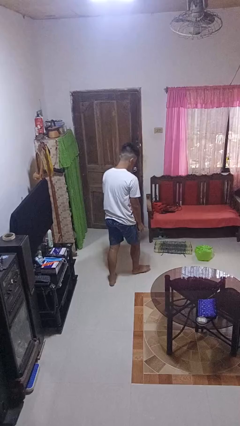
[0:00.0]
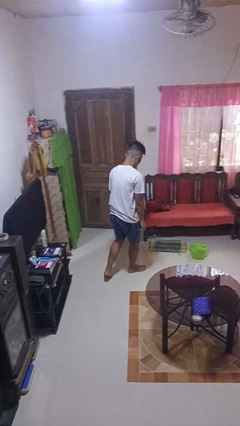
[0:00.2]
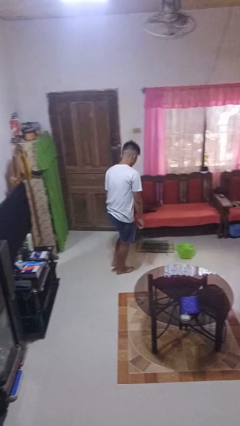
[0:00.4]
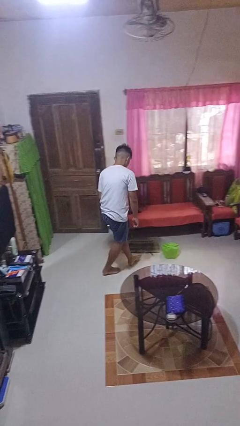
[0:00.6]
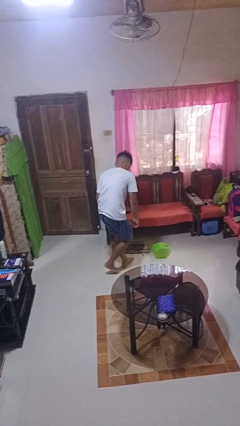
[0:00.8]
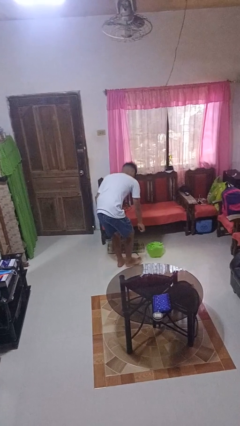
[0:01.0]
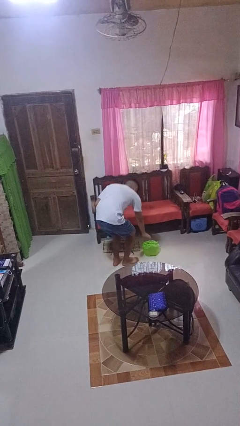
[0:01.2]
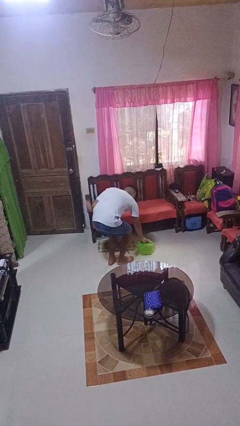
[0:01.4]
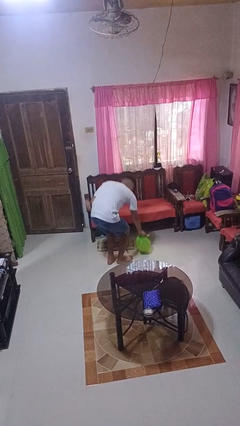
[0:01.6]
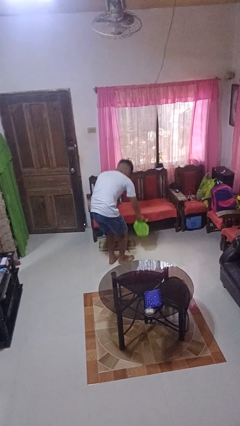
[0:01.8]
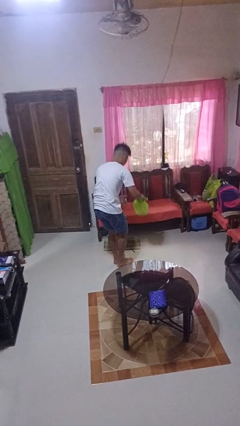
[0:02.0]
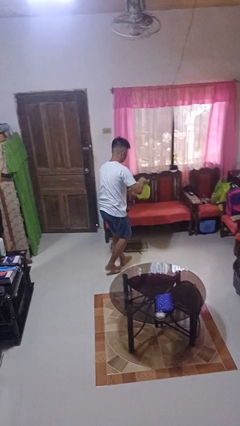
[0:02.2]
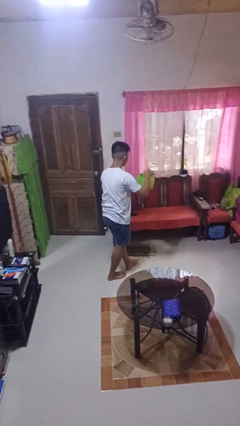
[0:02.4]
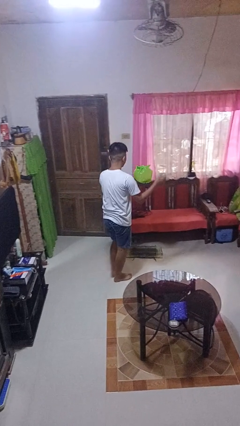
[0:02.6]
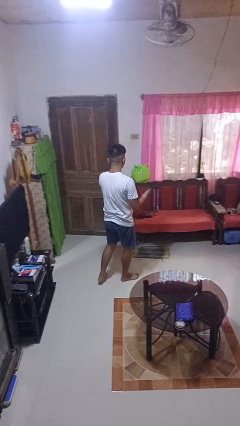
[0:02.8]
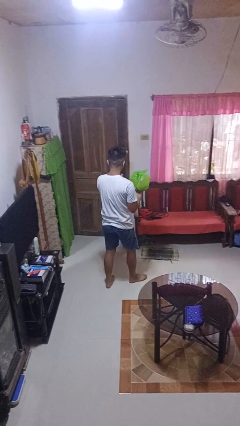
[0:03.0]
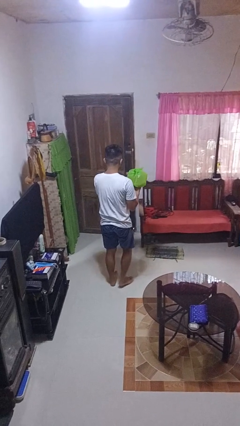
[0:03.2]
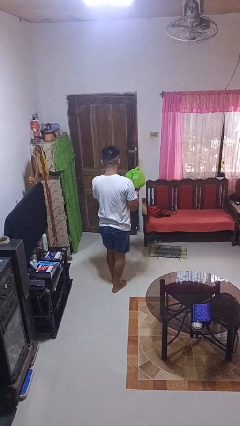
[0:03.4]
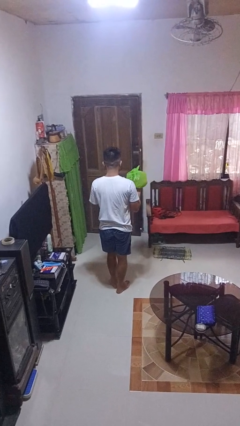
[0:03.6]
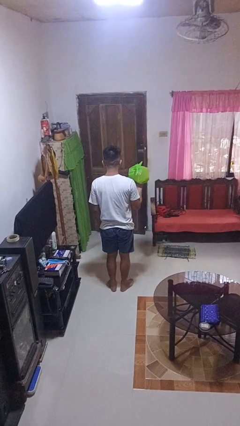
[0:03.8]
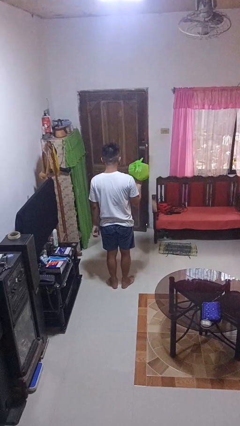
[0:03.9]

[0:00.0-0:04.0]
person picks up object from floor

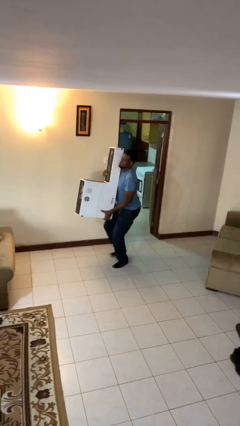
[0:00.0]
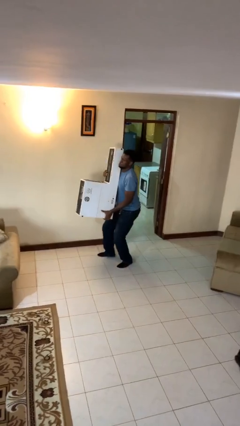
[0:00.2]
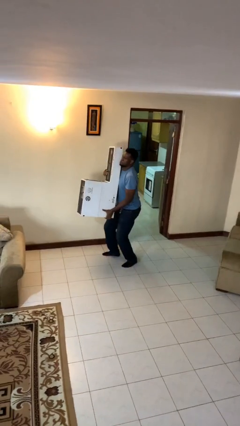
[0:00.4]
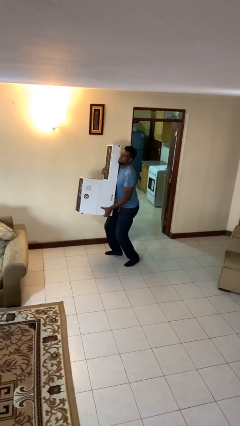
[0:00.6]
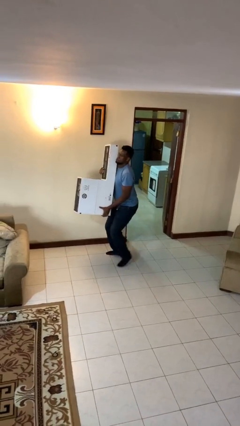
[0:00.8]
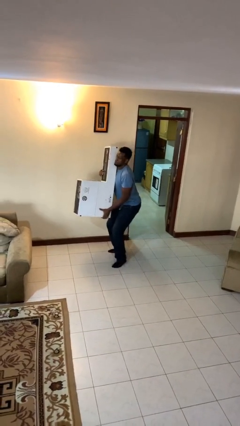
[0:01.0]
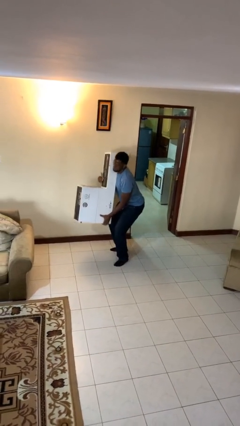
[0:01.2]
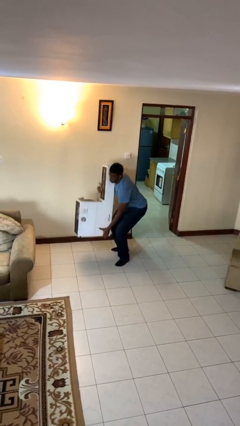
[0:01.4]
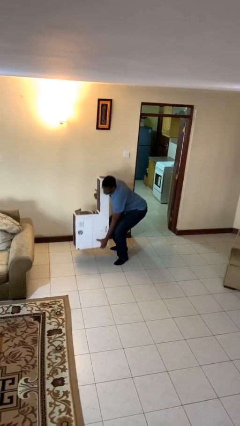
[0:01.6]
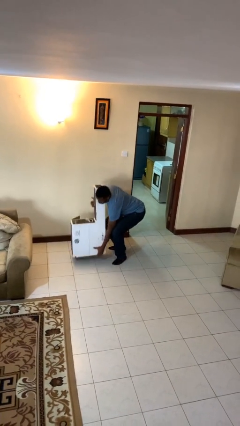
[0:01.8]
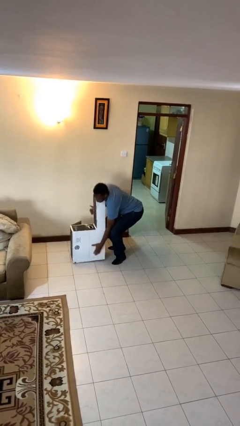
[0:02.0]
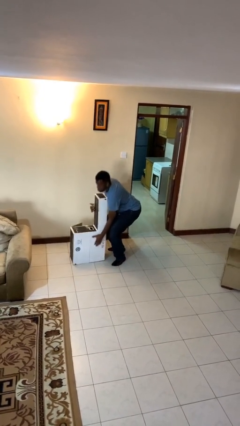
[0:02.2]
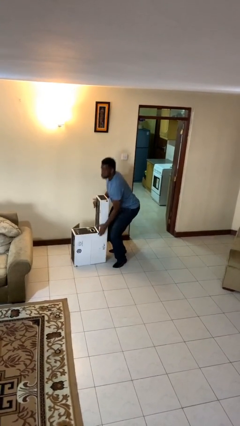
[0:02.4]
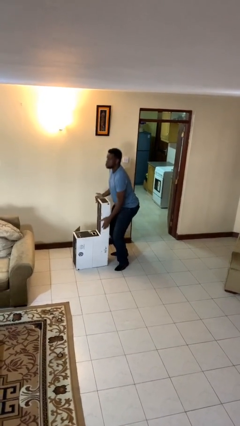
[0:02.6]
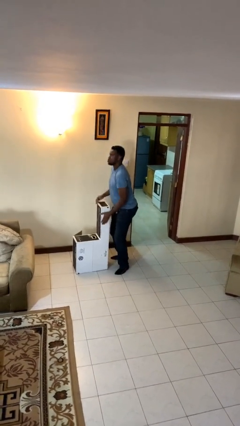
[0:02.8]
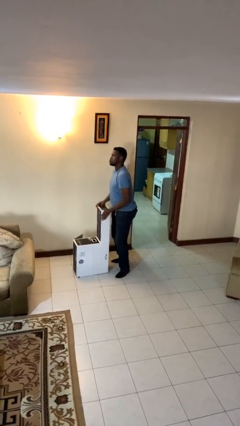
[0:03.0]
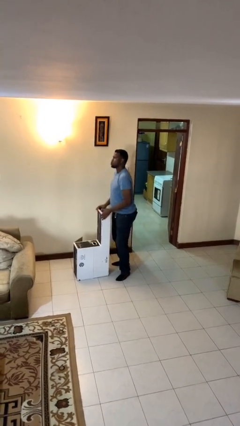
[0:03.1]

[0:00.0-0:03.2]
person puts down object on floor

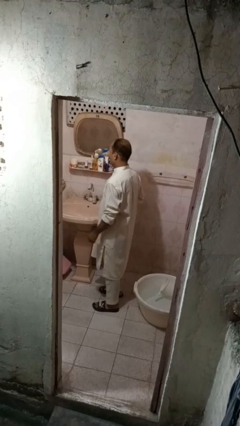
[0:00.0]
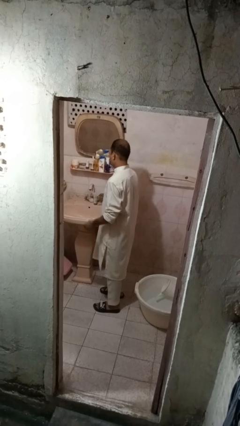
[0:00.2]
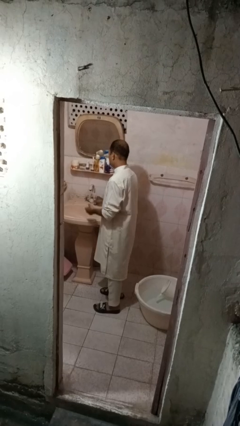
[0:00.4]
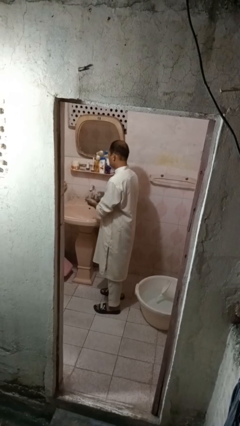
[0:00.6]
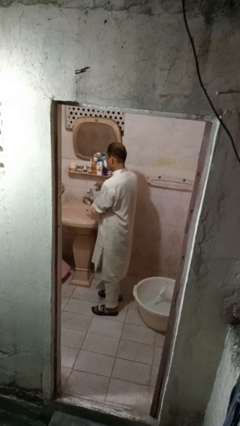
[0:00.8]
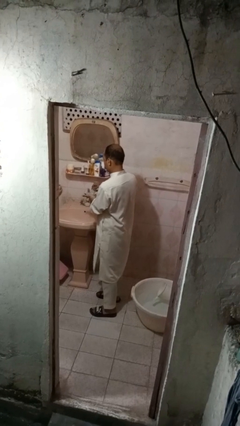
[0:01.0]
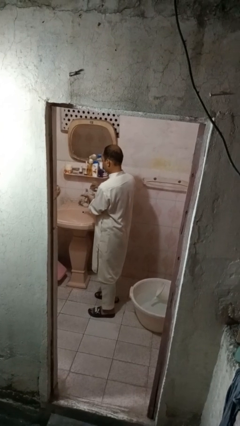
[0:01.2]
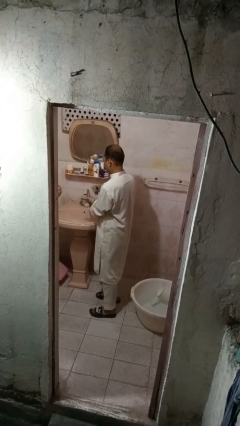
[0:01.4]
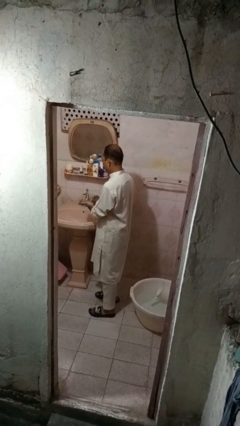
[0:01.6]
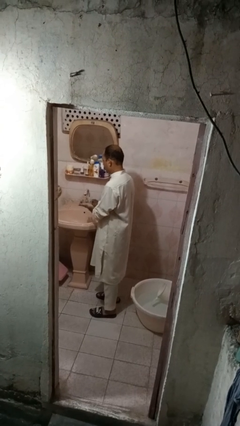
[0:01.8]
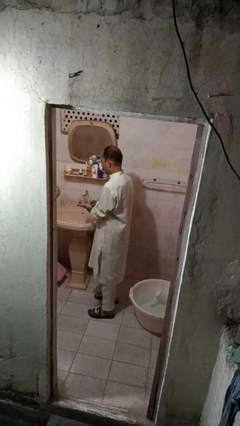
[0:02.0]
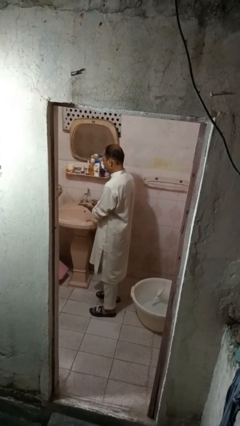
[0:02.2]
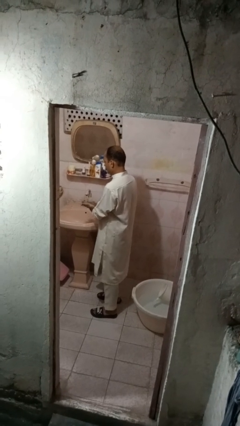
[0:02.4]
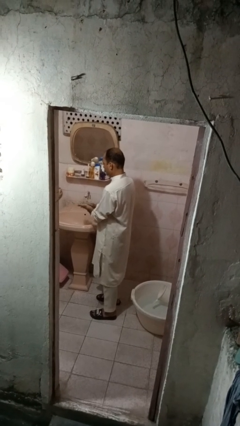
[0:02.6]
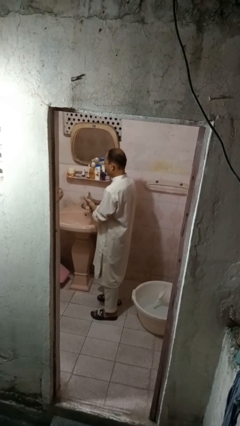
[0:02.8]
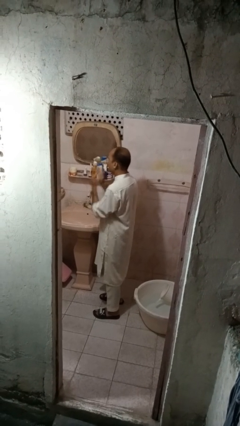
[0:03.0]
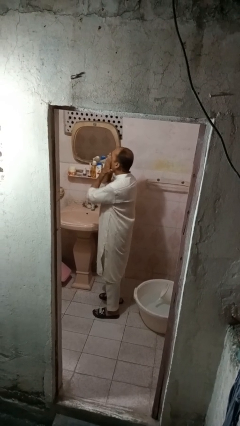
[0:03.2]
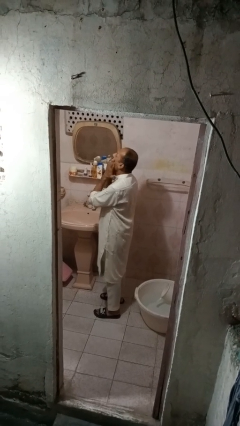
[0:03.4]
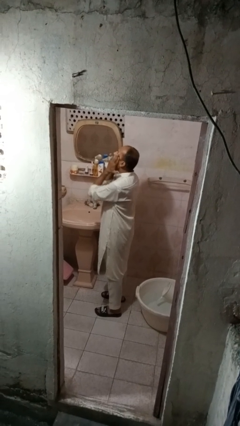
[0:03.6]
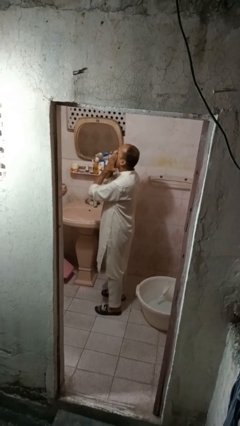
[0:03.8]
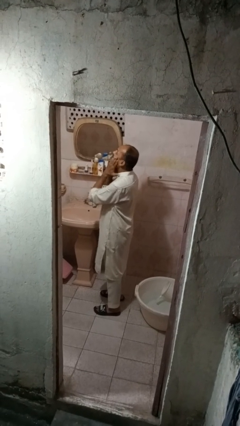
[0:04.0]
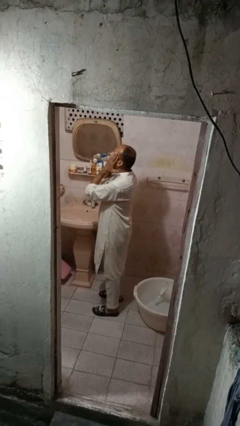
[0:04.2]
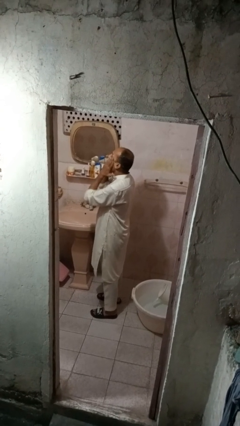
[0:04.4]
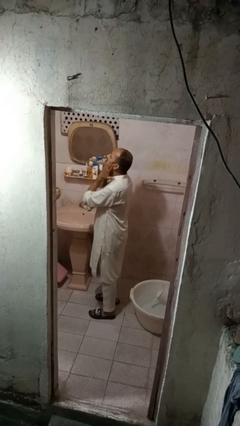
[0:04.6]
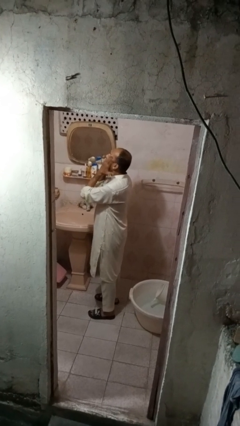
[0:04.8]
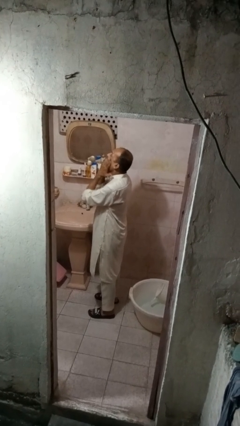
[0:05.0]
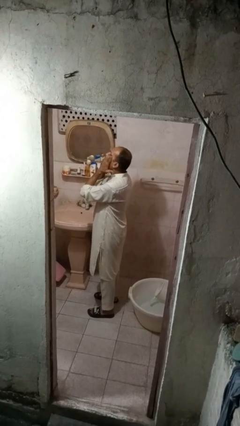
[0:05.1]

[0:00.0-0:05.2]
person applies facial moisturizer

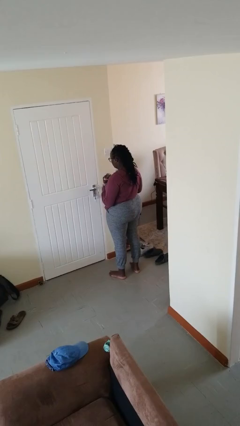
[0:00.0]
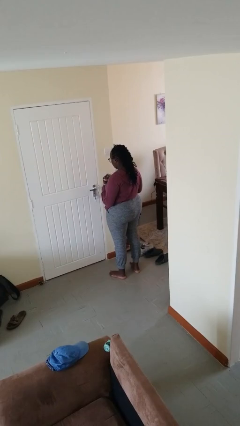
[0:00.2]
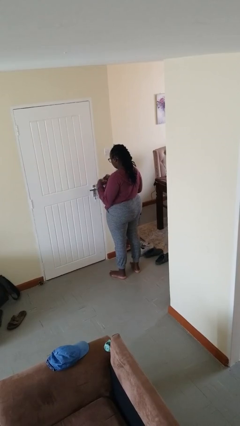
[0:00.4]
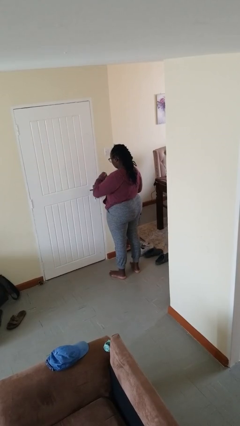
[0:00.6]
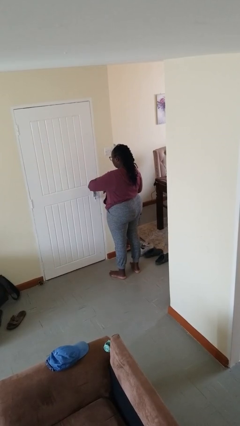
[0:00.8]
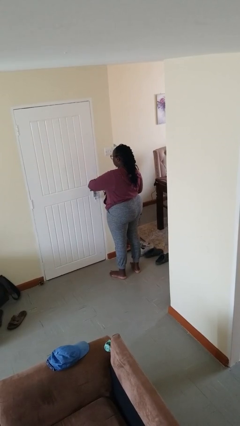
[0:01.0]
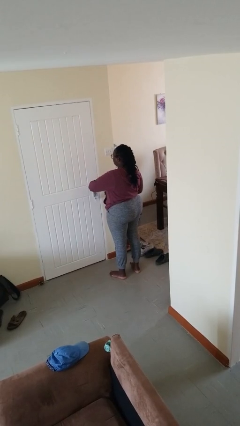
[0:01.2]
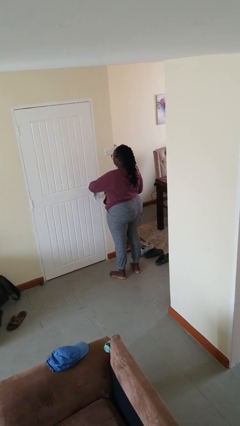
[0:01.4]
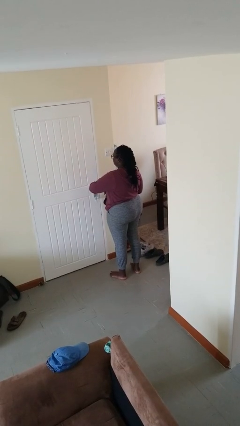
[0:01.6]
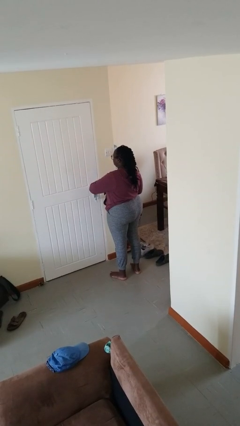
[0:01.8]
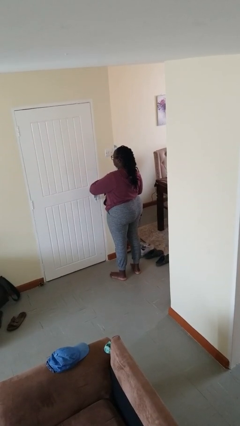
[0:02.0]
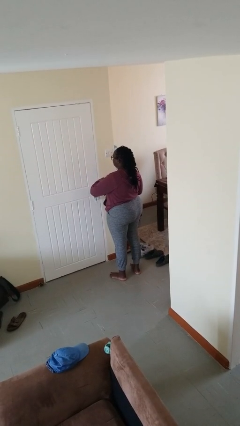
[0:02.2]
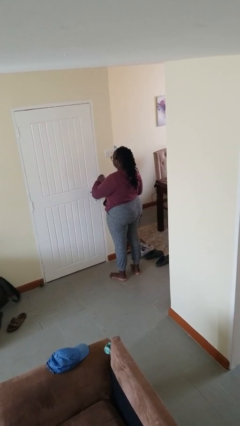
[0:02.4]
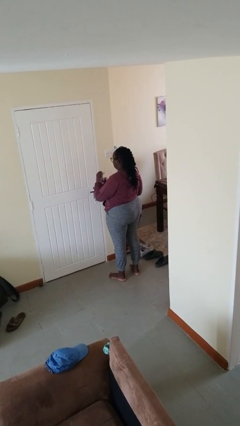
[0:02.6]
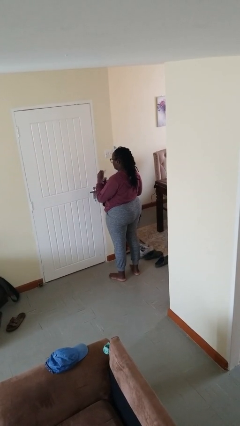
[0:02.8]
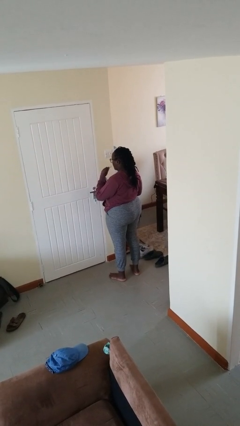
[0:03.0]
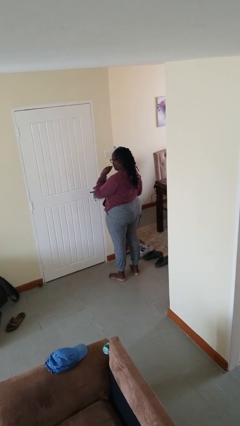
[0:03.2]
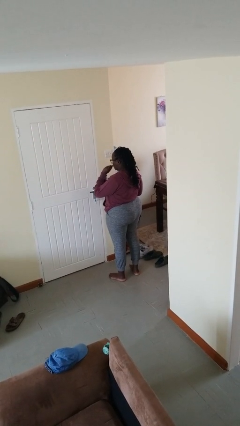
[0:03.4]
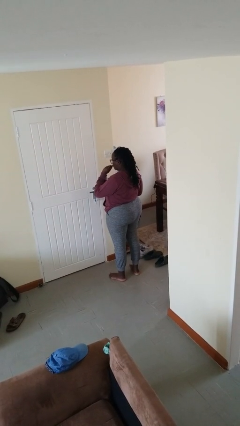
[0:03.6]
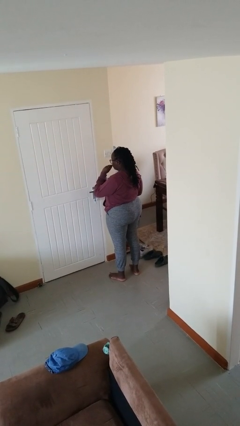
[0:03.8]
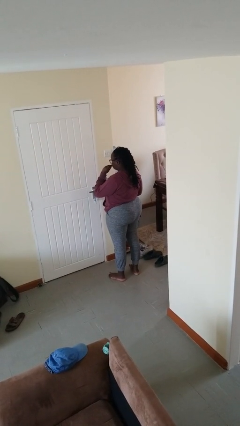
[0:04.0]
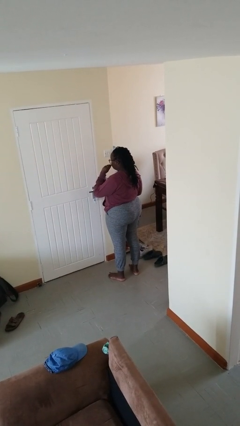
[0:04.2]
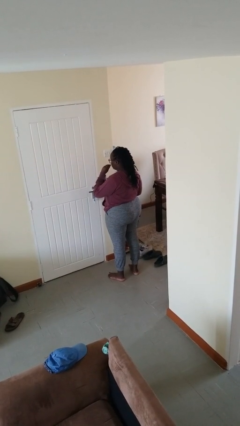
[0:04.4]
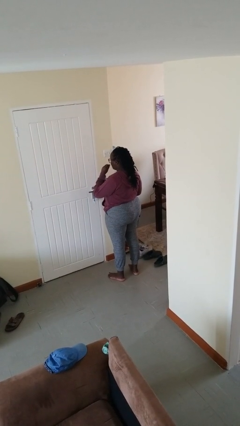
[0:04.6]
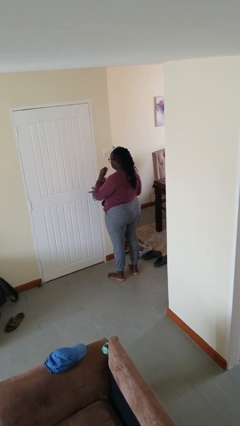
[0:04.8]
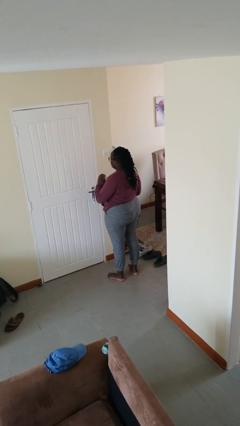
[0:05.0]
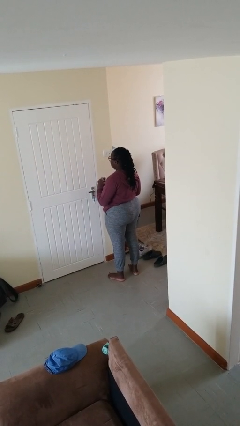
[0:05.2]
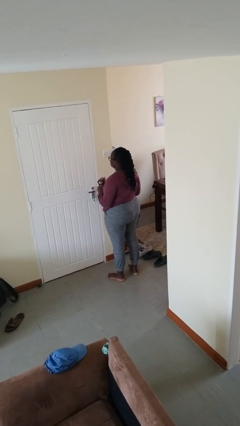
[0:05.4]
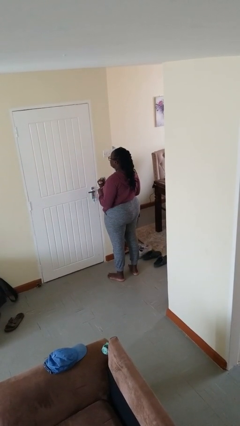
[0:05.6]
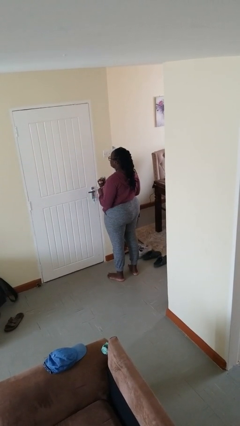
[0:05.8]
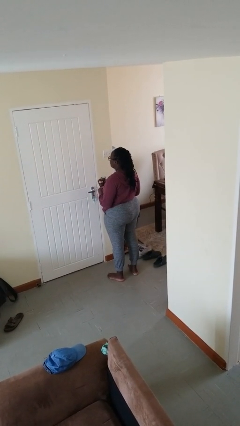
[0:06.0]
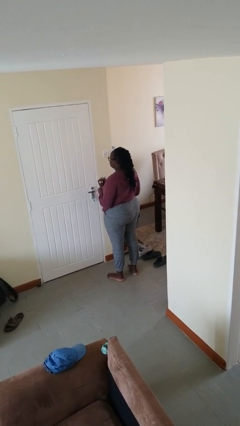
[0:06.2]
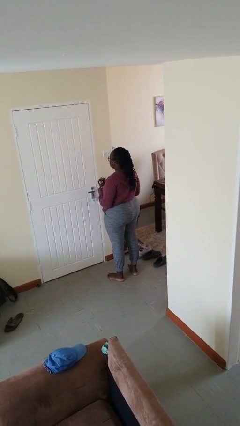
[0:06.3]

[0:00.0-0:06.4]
person eats snack from bag
